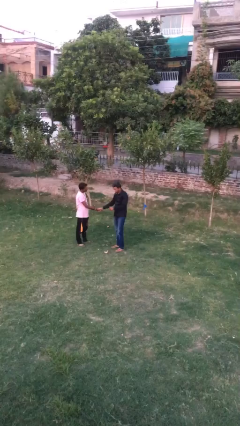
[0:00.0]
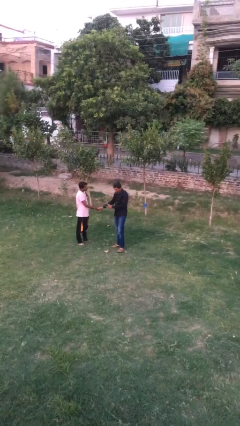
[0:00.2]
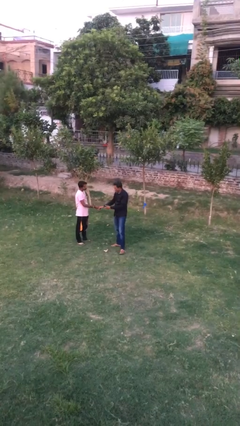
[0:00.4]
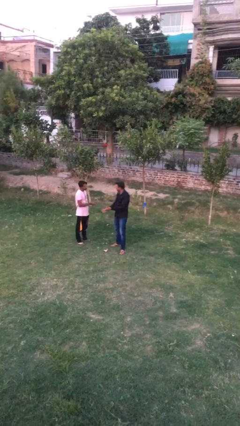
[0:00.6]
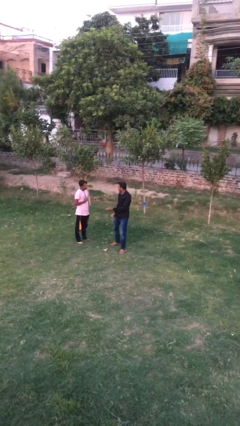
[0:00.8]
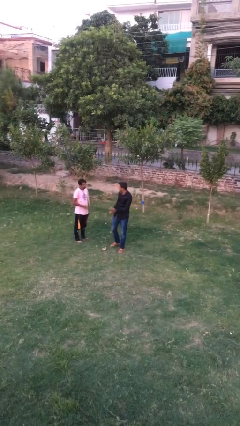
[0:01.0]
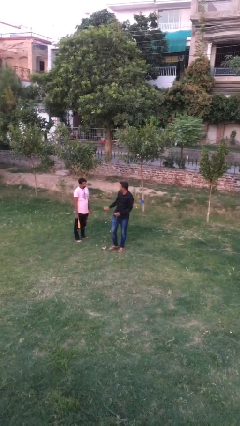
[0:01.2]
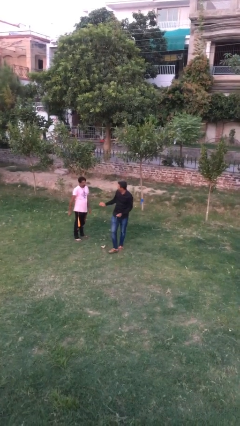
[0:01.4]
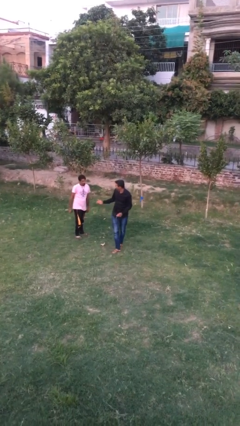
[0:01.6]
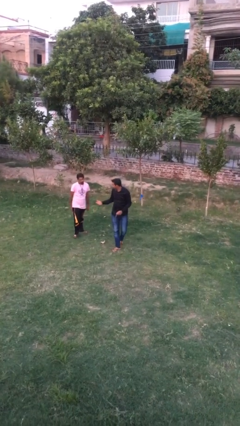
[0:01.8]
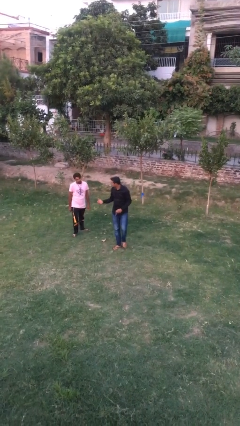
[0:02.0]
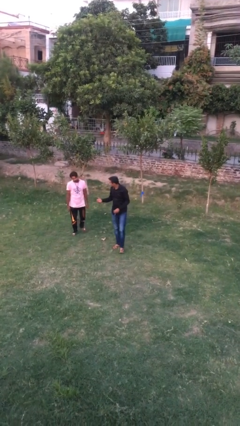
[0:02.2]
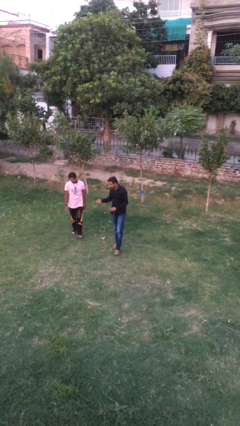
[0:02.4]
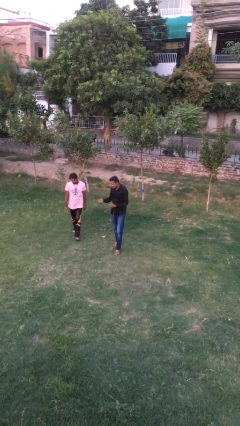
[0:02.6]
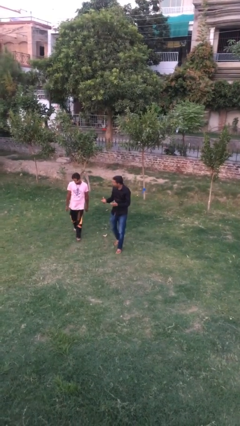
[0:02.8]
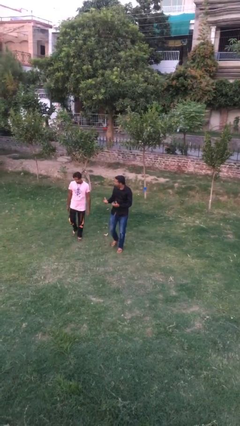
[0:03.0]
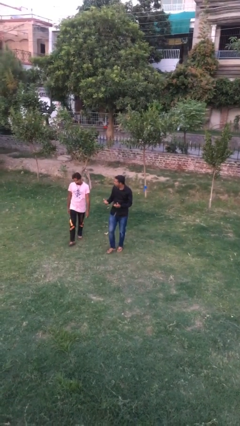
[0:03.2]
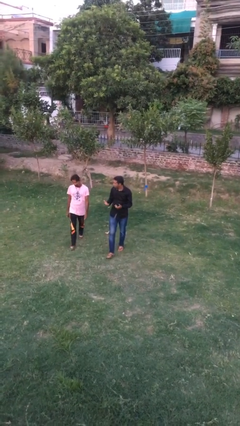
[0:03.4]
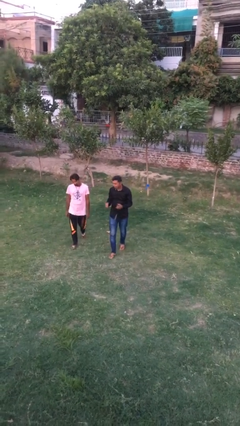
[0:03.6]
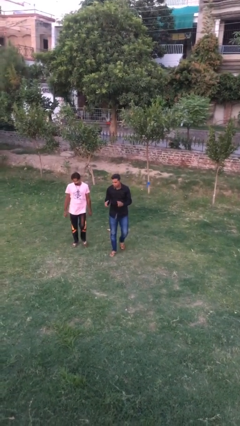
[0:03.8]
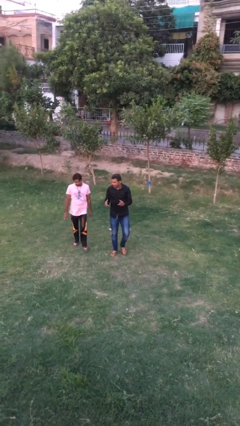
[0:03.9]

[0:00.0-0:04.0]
person talks to person

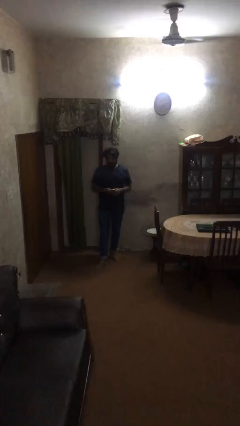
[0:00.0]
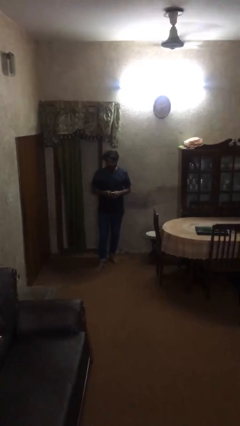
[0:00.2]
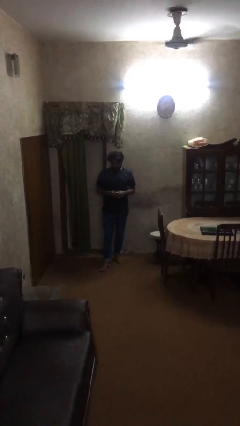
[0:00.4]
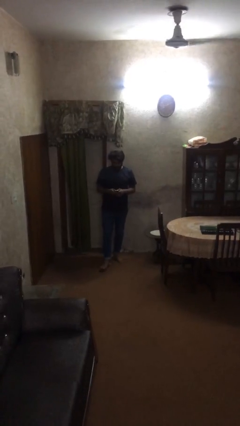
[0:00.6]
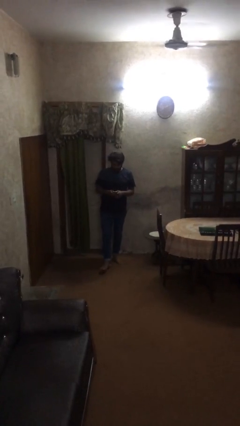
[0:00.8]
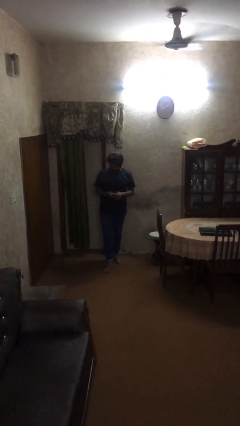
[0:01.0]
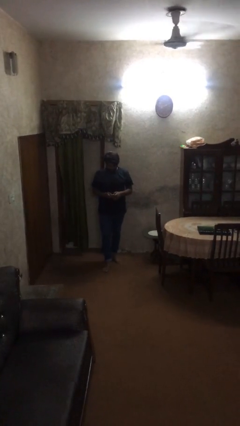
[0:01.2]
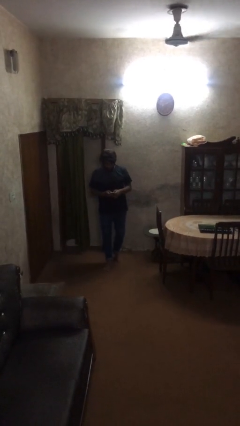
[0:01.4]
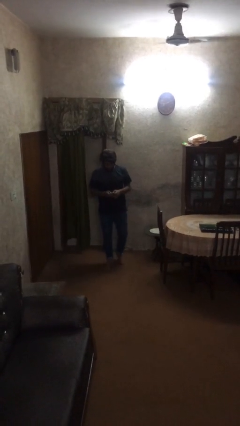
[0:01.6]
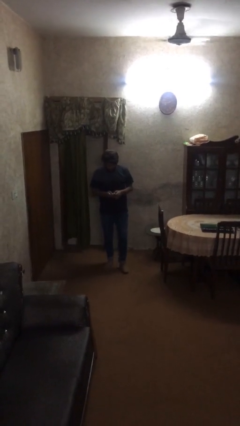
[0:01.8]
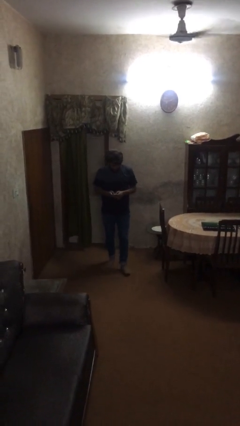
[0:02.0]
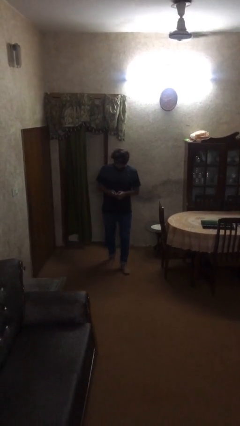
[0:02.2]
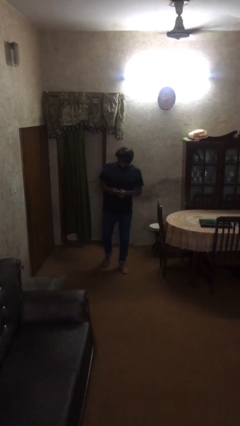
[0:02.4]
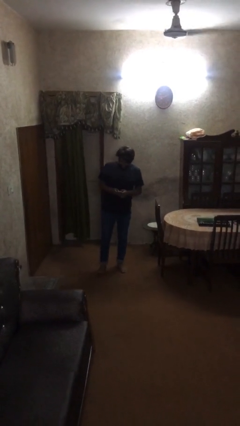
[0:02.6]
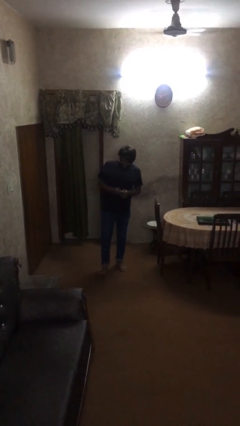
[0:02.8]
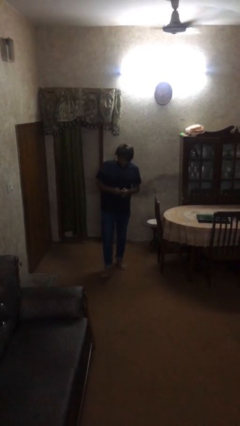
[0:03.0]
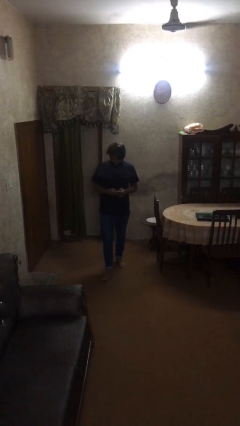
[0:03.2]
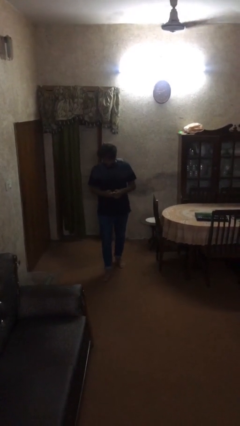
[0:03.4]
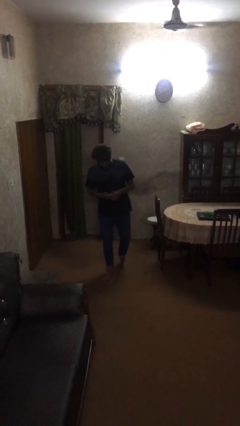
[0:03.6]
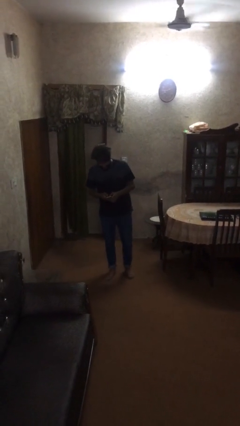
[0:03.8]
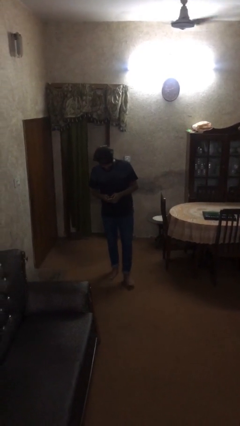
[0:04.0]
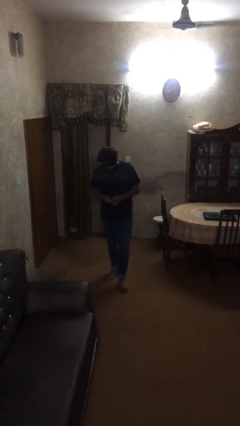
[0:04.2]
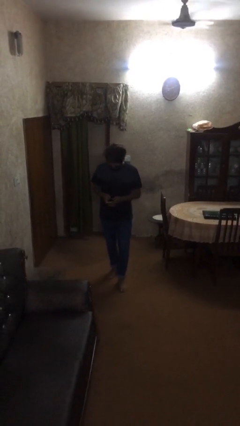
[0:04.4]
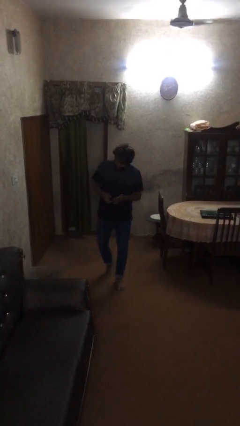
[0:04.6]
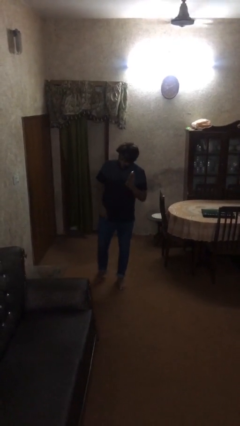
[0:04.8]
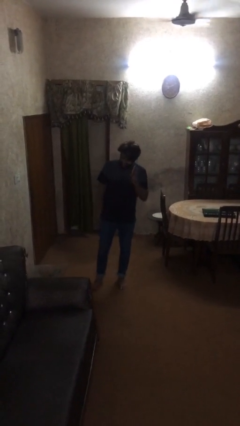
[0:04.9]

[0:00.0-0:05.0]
person texts on phone

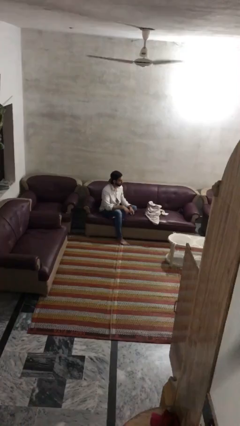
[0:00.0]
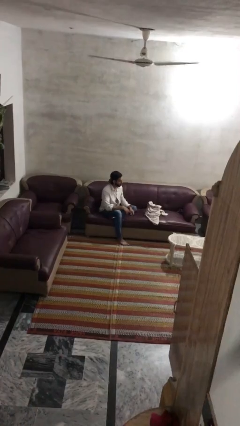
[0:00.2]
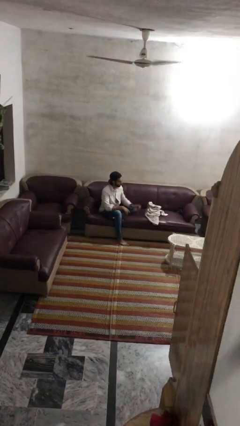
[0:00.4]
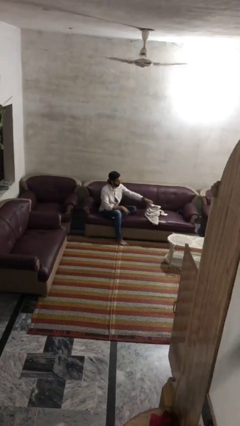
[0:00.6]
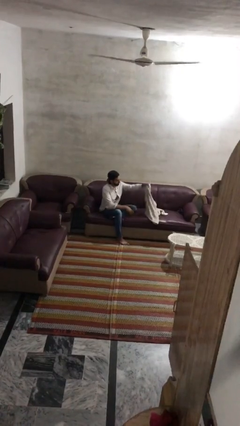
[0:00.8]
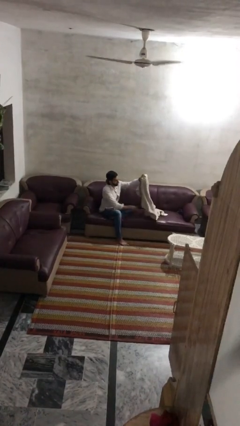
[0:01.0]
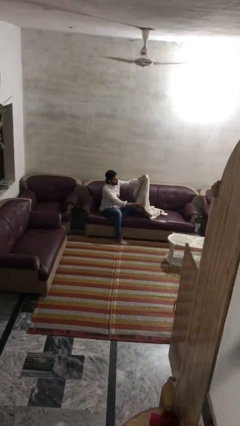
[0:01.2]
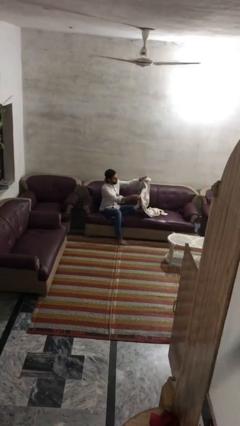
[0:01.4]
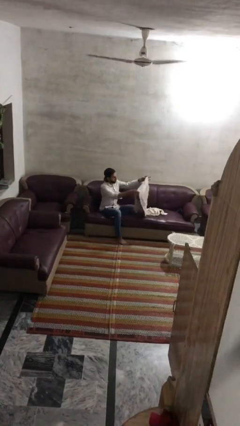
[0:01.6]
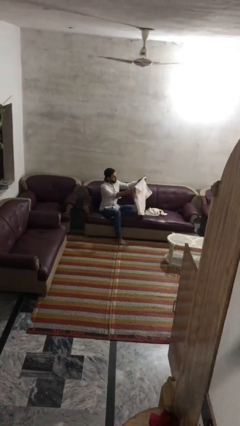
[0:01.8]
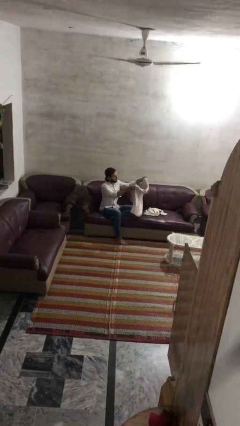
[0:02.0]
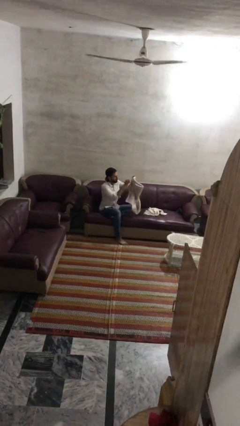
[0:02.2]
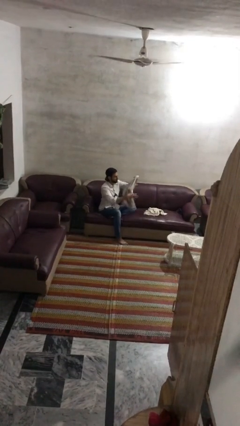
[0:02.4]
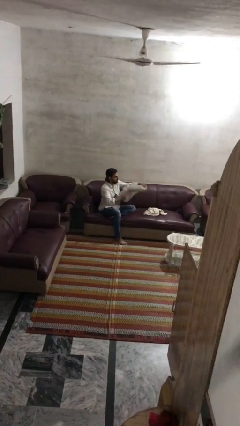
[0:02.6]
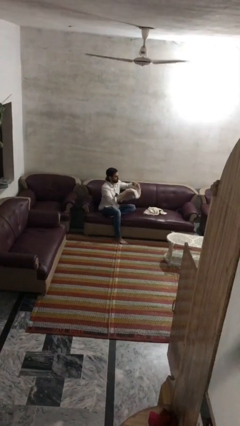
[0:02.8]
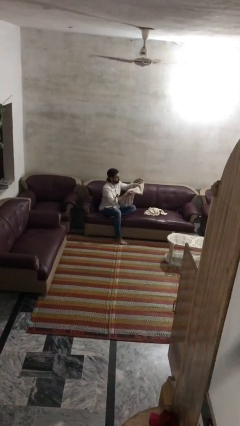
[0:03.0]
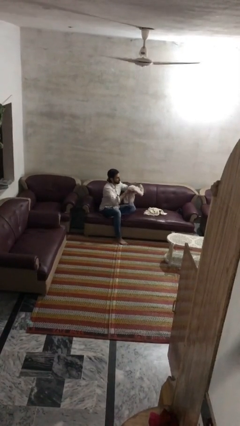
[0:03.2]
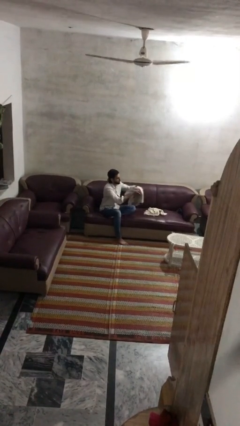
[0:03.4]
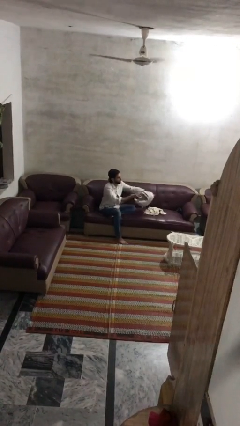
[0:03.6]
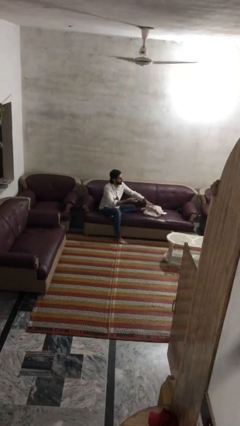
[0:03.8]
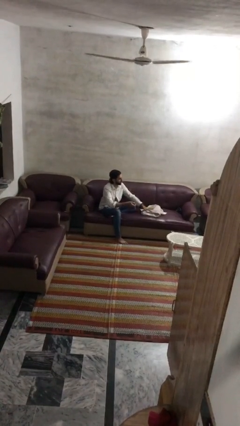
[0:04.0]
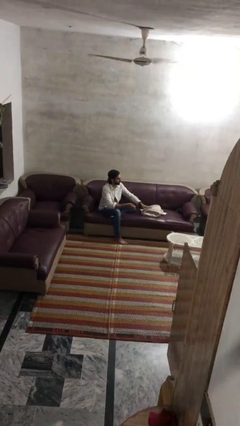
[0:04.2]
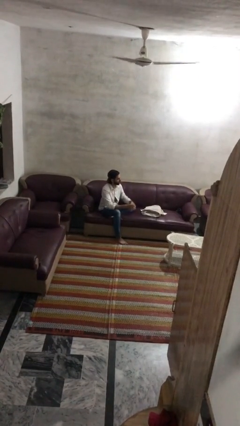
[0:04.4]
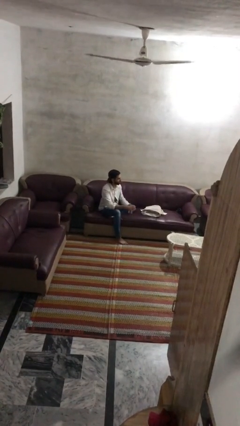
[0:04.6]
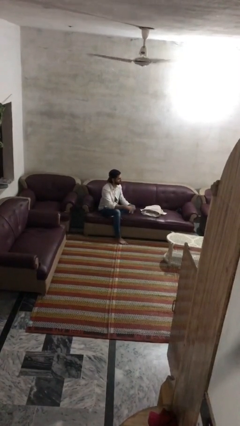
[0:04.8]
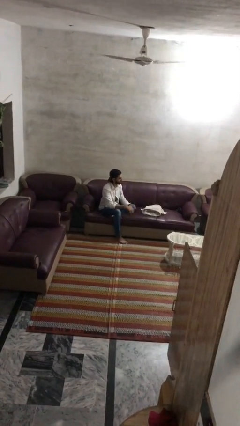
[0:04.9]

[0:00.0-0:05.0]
person folds towel

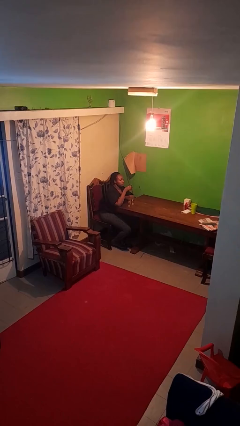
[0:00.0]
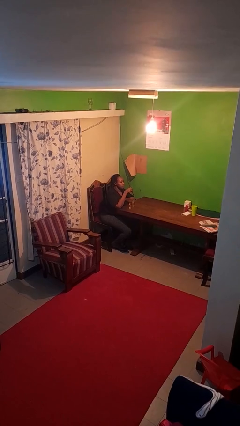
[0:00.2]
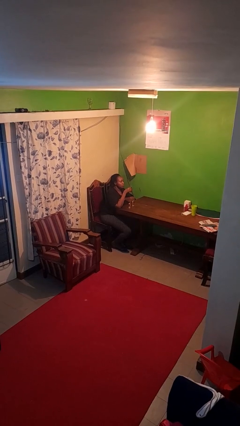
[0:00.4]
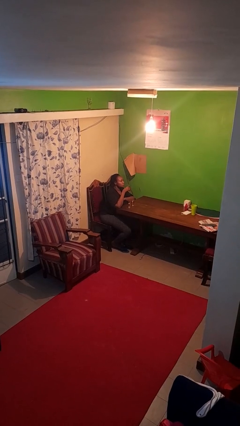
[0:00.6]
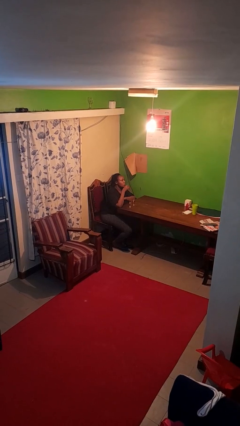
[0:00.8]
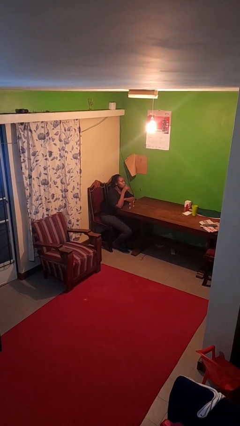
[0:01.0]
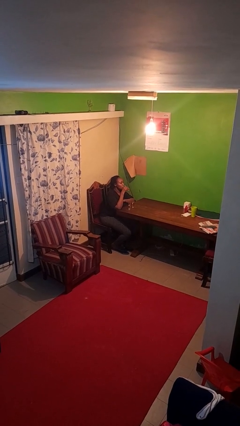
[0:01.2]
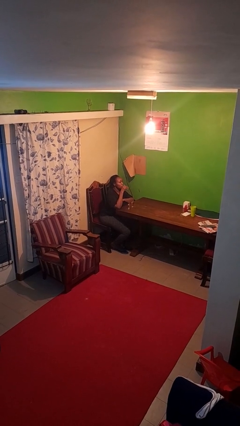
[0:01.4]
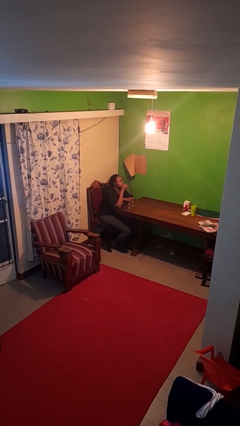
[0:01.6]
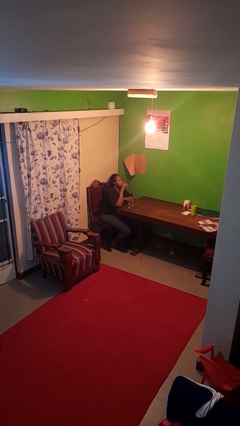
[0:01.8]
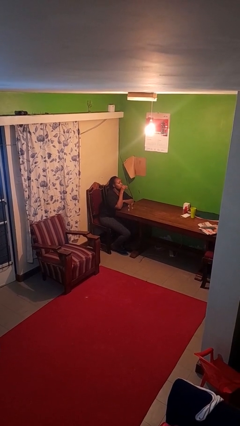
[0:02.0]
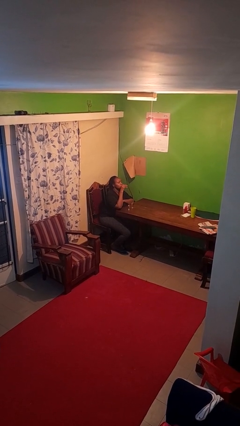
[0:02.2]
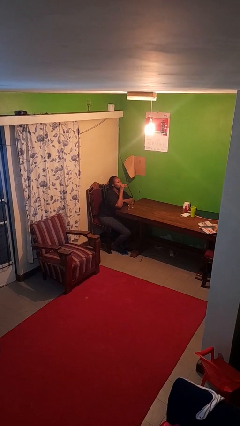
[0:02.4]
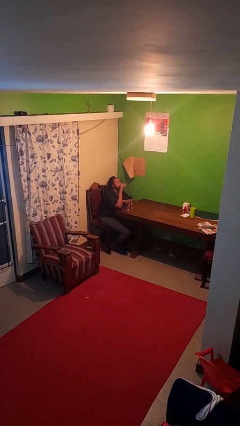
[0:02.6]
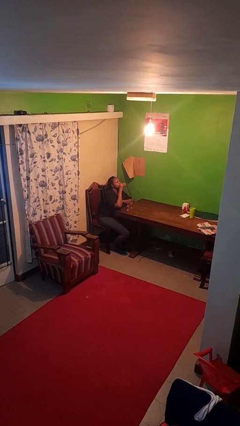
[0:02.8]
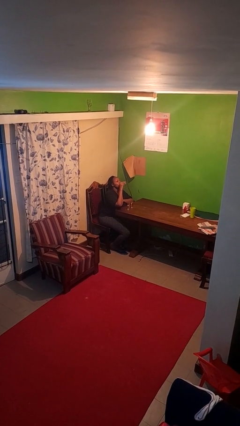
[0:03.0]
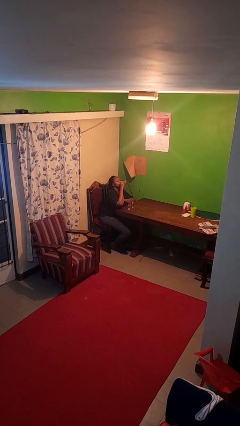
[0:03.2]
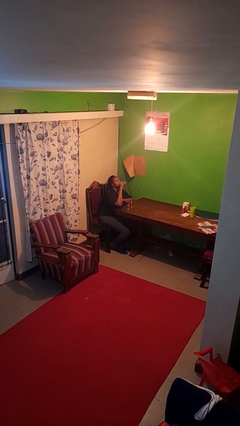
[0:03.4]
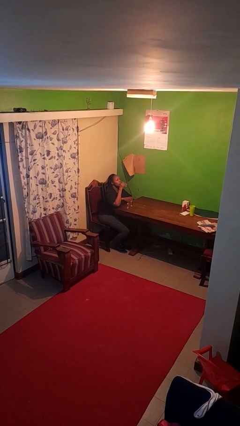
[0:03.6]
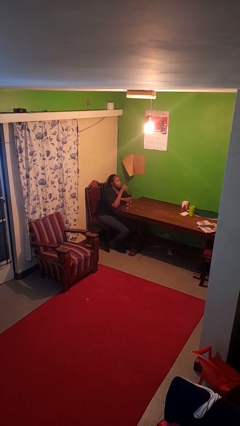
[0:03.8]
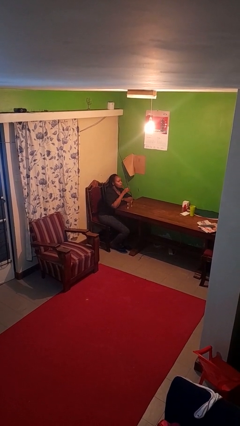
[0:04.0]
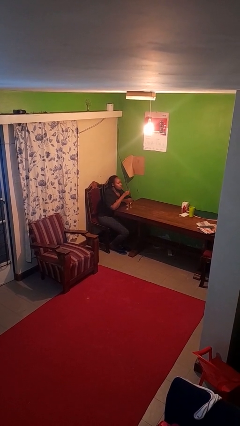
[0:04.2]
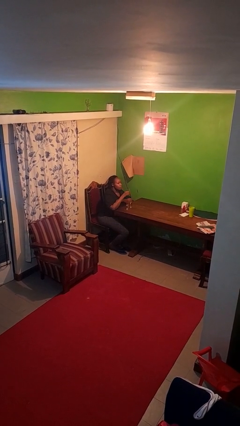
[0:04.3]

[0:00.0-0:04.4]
person drinks from shotglass
